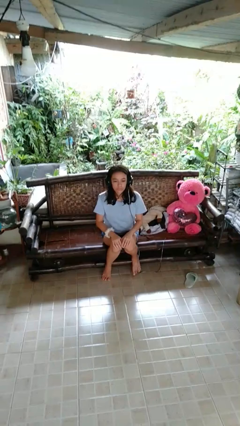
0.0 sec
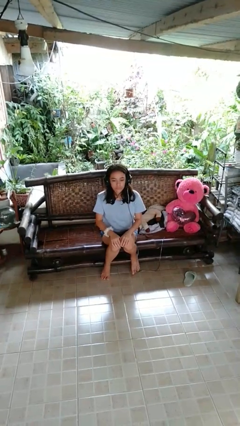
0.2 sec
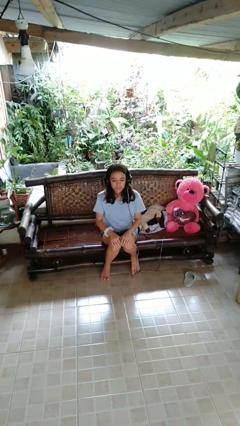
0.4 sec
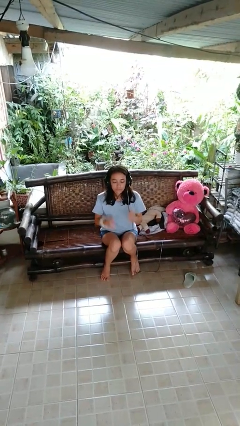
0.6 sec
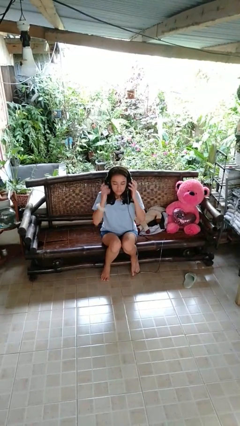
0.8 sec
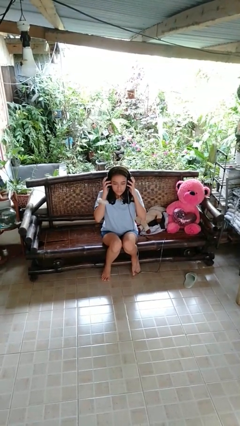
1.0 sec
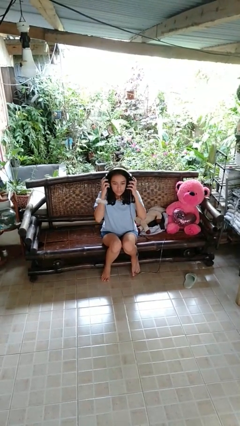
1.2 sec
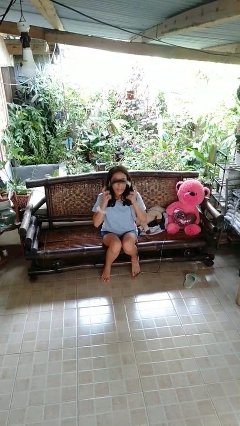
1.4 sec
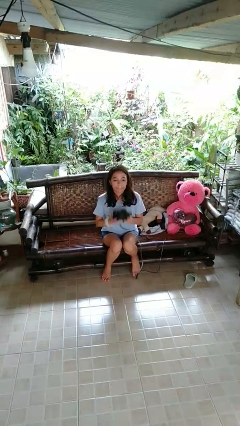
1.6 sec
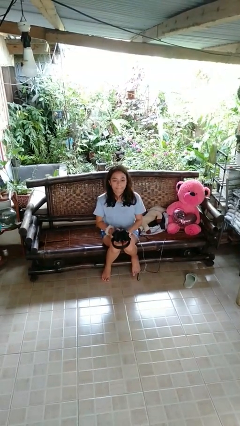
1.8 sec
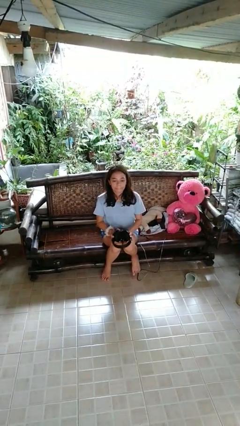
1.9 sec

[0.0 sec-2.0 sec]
person takes off headphones

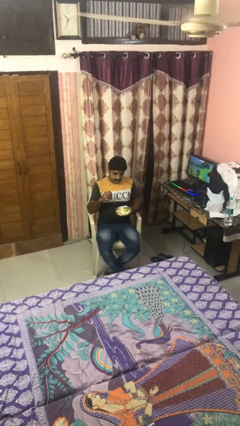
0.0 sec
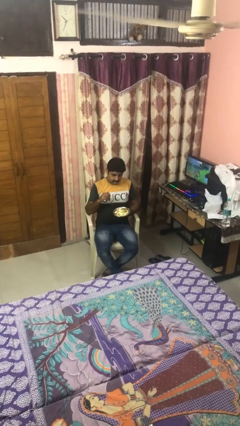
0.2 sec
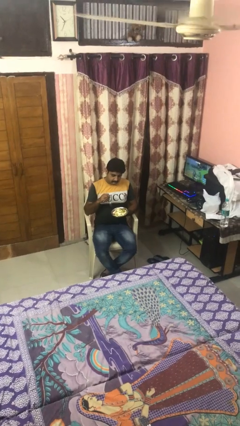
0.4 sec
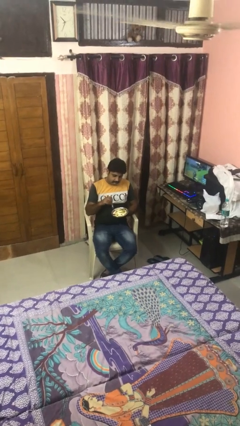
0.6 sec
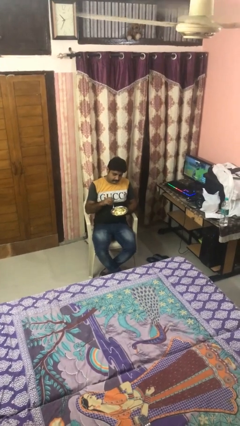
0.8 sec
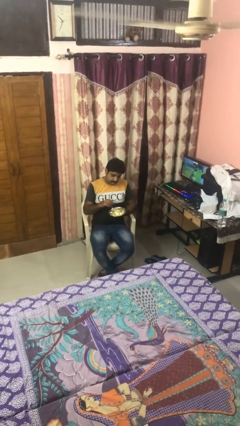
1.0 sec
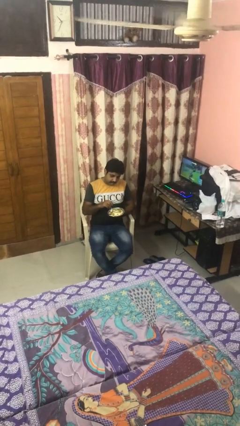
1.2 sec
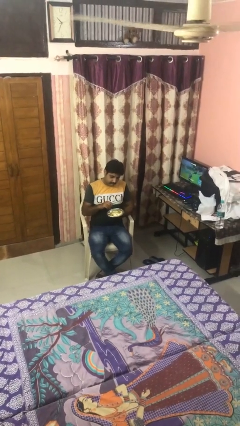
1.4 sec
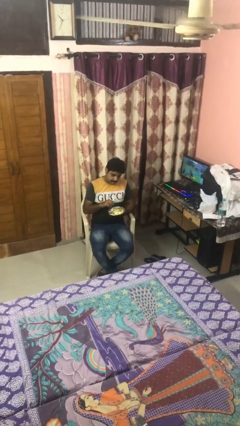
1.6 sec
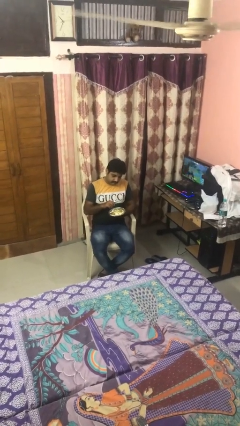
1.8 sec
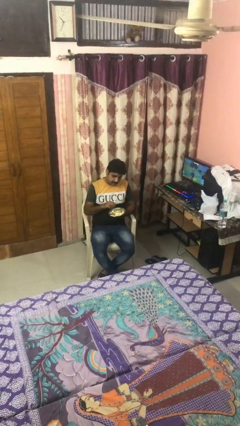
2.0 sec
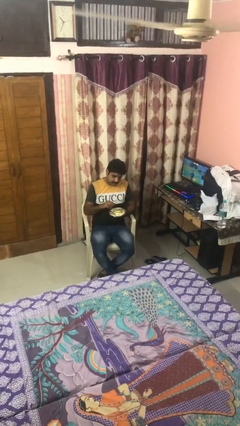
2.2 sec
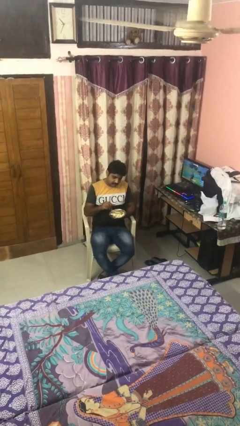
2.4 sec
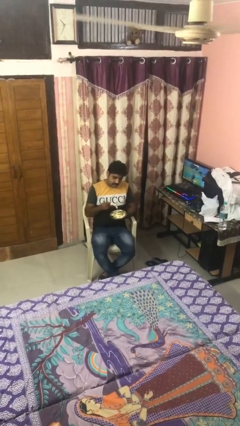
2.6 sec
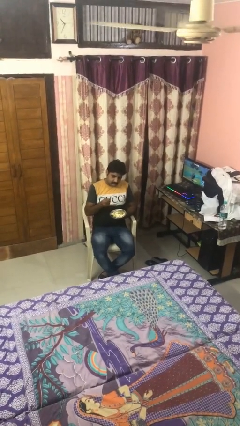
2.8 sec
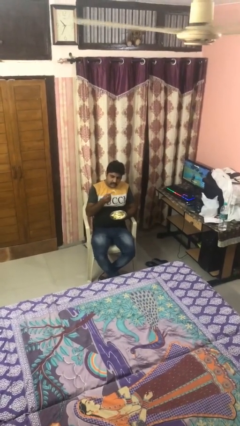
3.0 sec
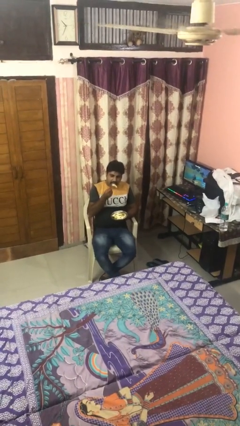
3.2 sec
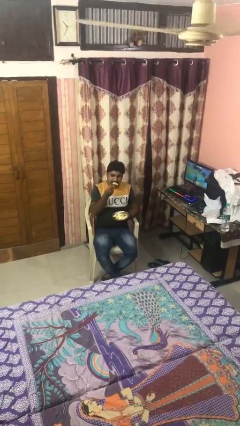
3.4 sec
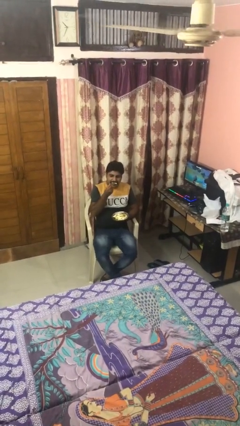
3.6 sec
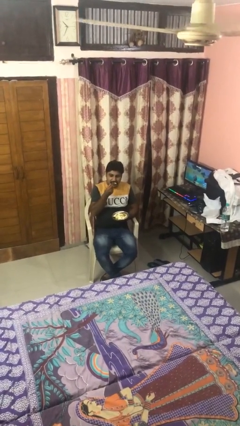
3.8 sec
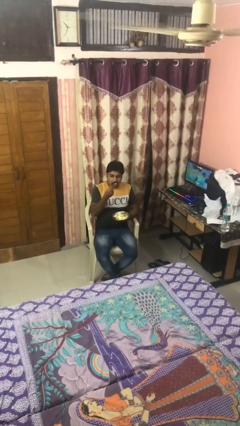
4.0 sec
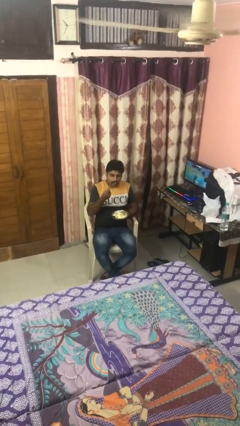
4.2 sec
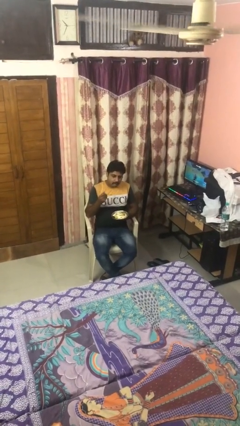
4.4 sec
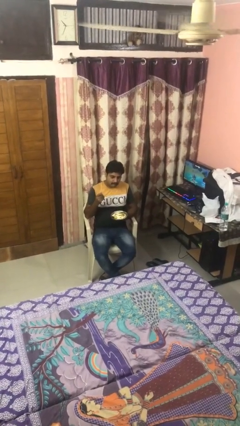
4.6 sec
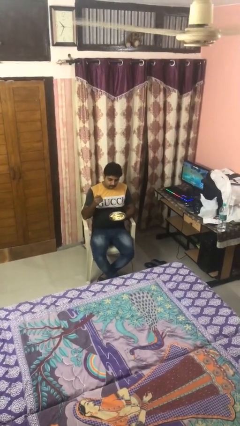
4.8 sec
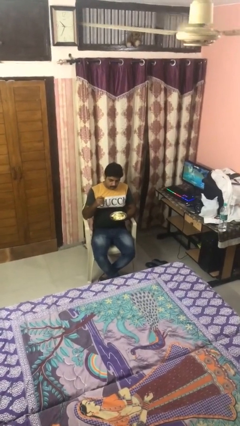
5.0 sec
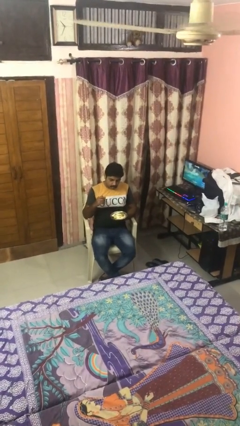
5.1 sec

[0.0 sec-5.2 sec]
person eats with utensil

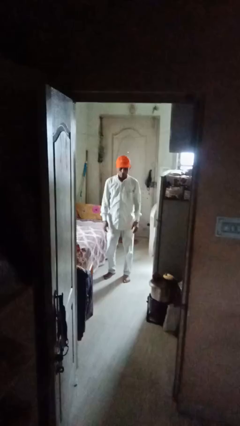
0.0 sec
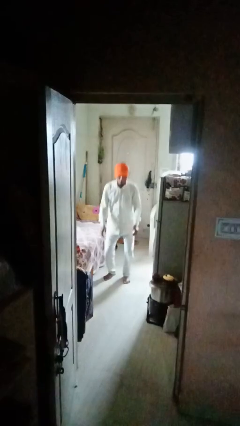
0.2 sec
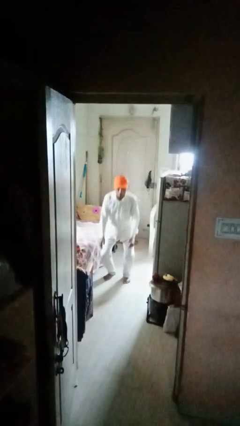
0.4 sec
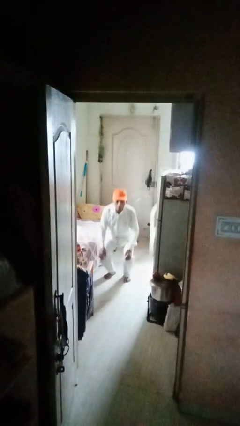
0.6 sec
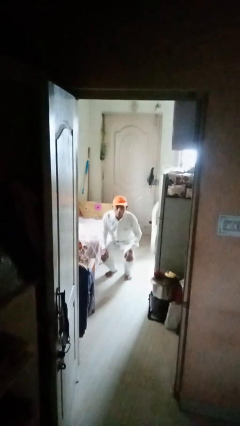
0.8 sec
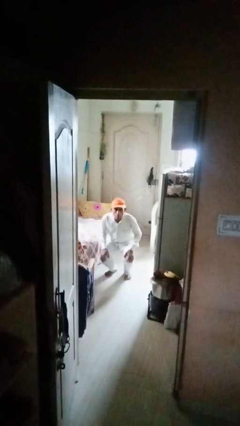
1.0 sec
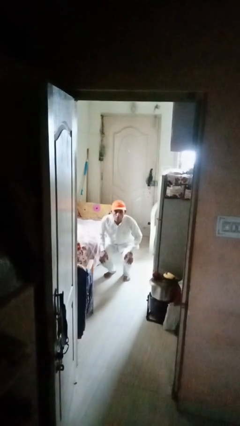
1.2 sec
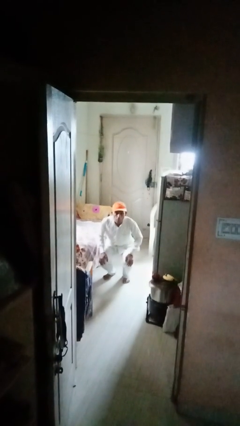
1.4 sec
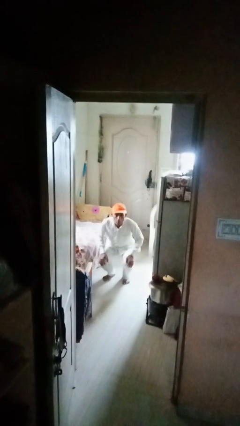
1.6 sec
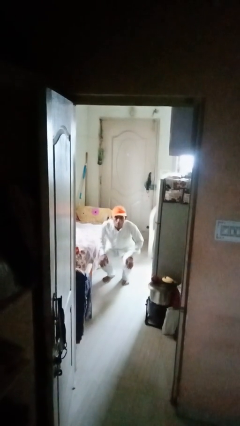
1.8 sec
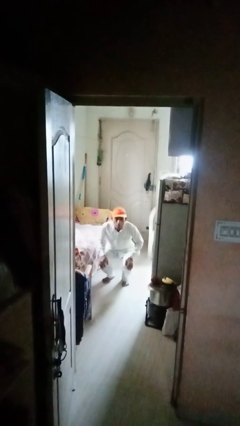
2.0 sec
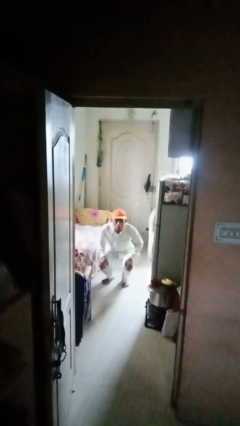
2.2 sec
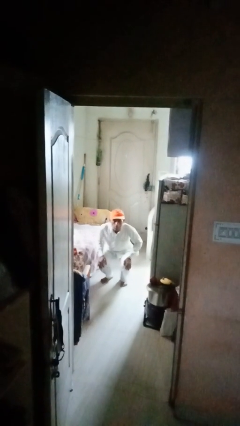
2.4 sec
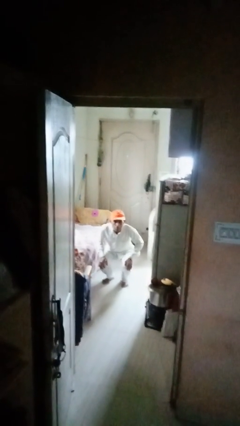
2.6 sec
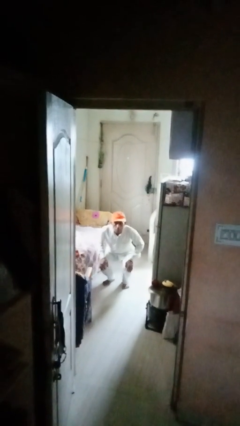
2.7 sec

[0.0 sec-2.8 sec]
person squats

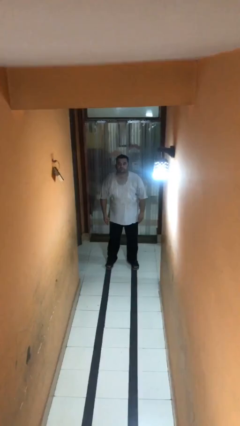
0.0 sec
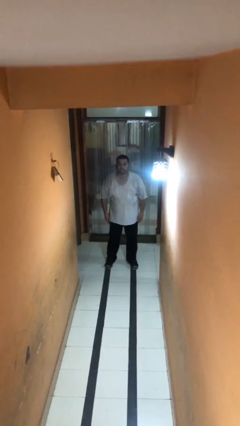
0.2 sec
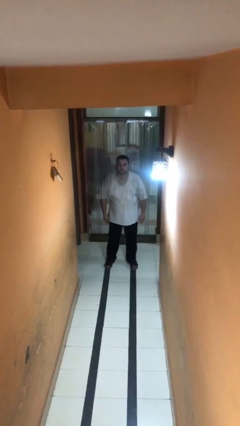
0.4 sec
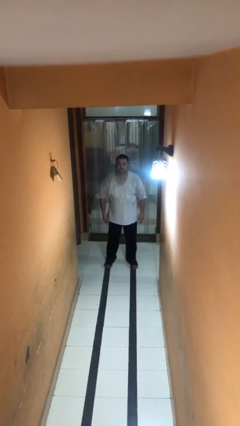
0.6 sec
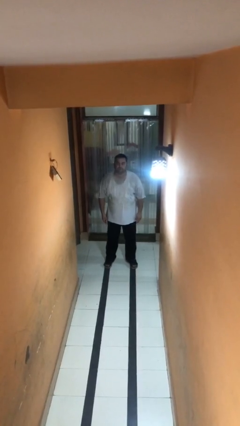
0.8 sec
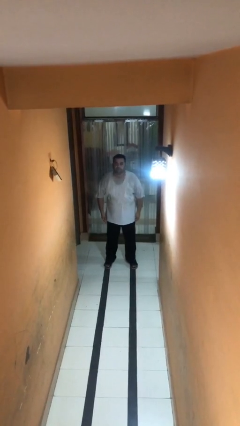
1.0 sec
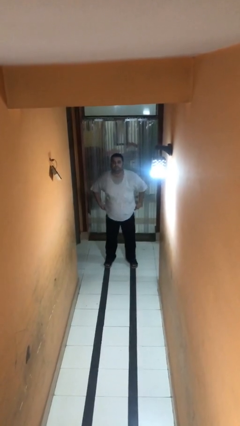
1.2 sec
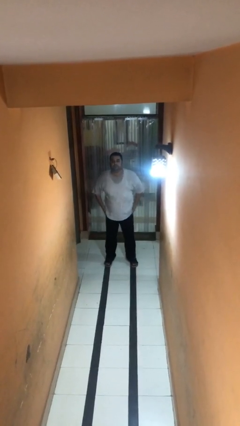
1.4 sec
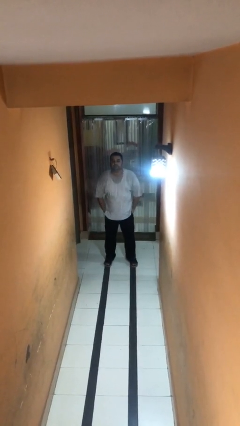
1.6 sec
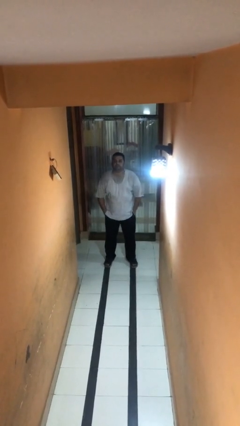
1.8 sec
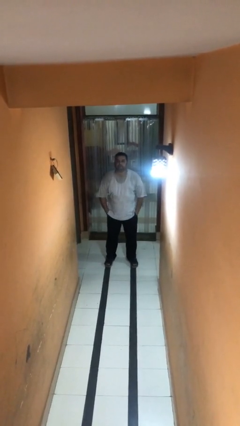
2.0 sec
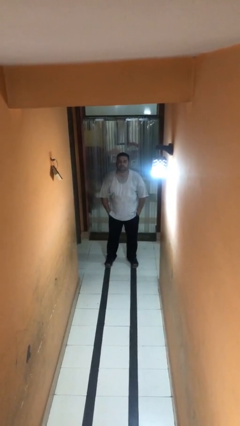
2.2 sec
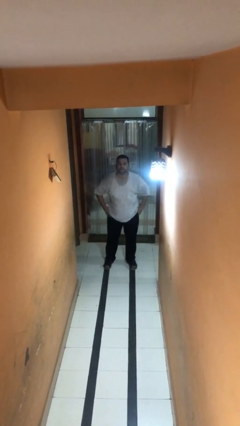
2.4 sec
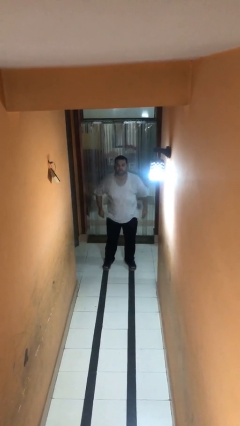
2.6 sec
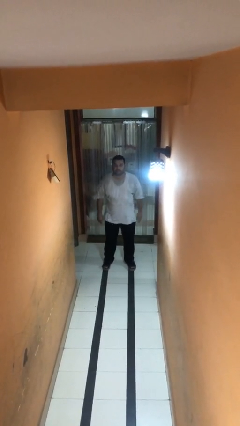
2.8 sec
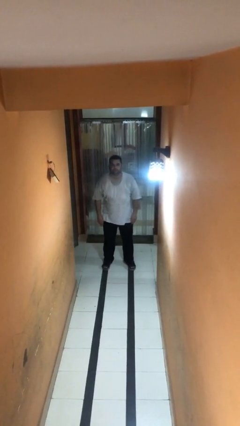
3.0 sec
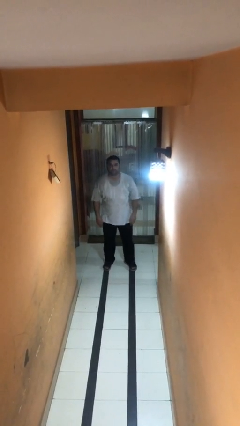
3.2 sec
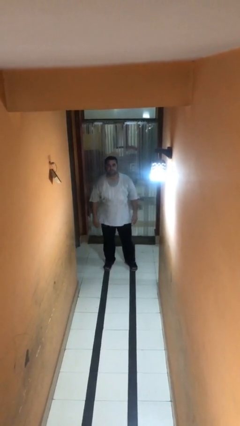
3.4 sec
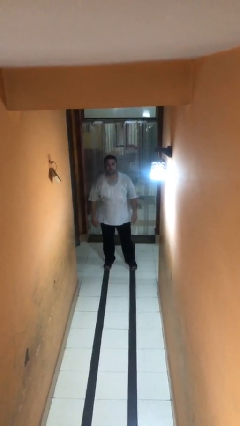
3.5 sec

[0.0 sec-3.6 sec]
person puts hands in back pockets

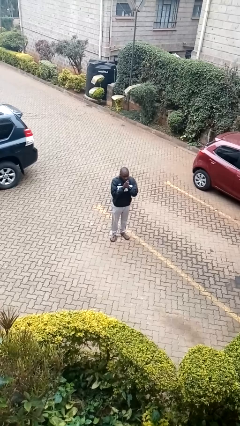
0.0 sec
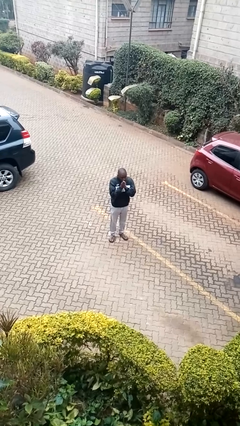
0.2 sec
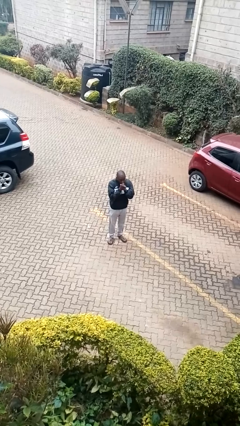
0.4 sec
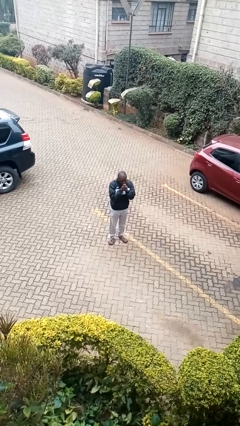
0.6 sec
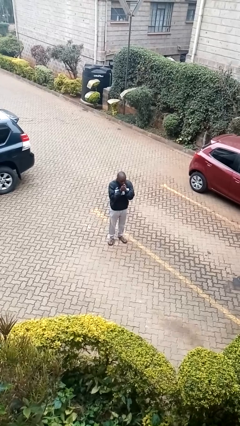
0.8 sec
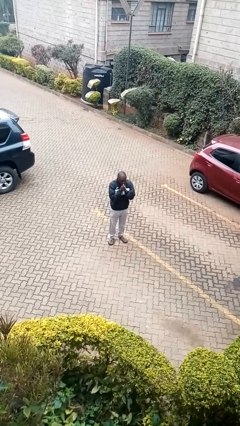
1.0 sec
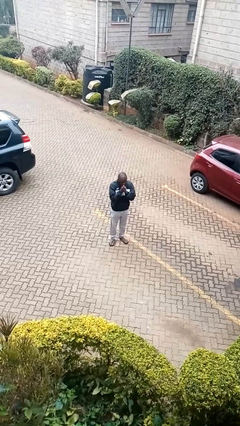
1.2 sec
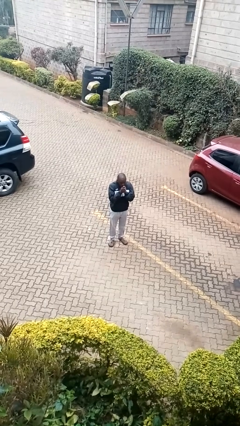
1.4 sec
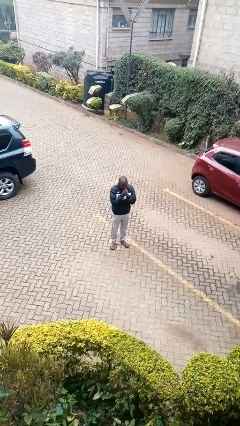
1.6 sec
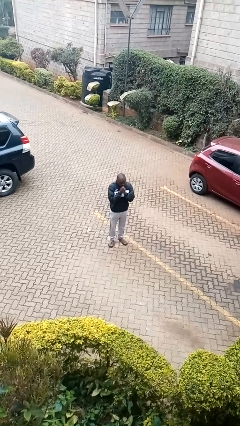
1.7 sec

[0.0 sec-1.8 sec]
person blows into hands

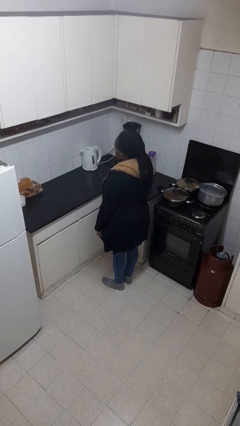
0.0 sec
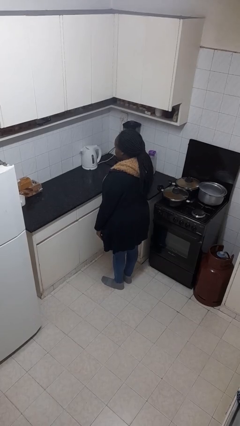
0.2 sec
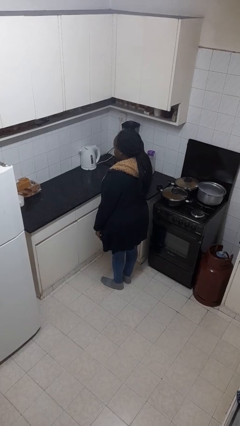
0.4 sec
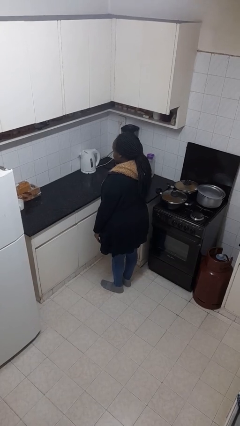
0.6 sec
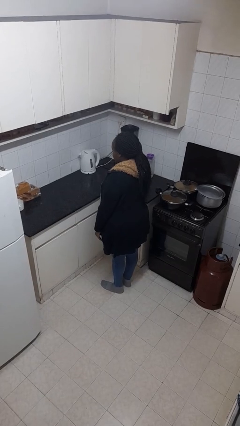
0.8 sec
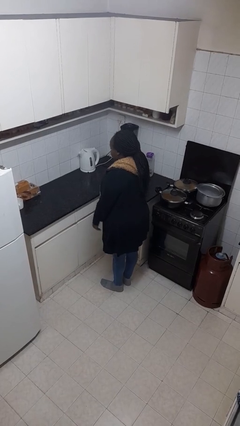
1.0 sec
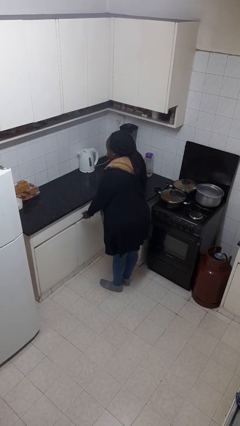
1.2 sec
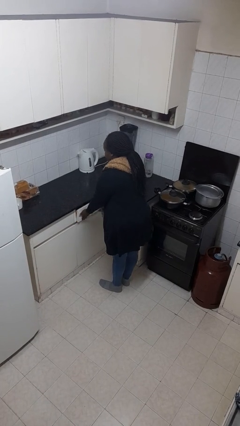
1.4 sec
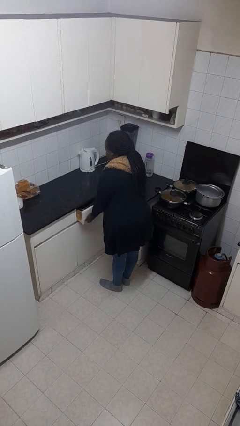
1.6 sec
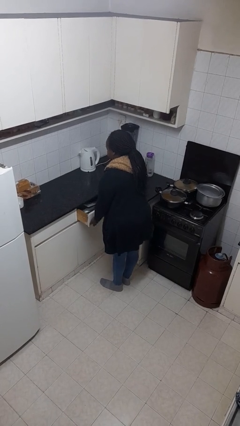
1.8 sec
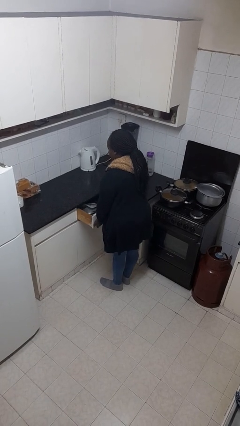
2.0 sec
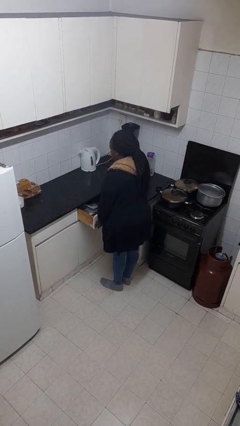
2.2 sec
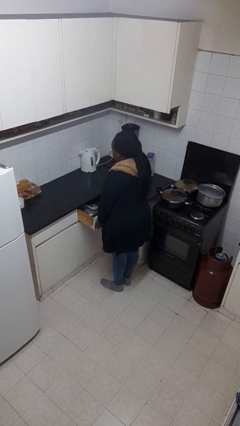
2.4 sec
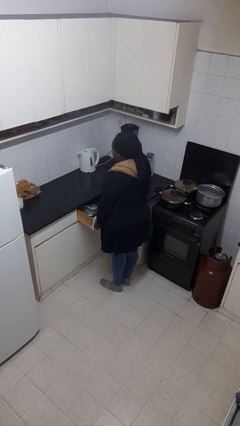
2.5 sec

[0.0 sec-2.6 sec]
person opens kitchen drawer
